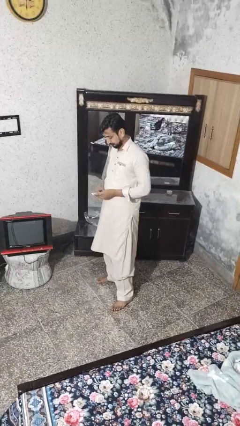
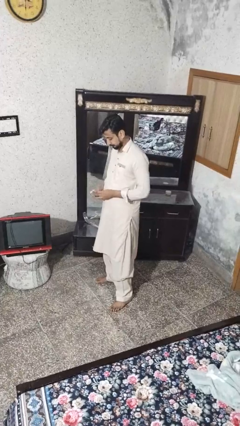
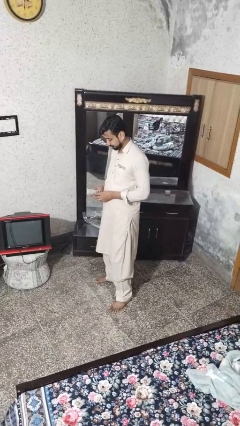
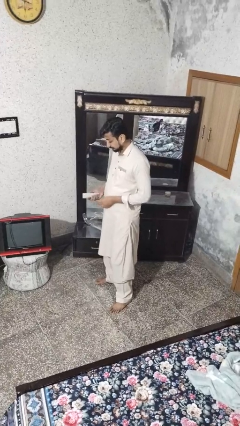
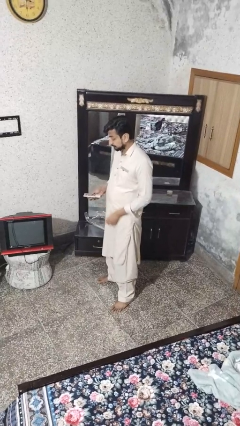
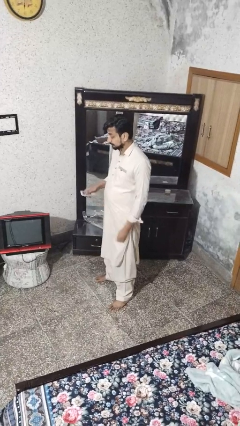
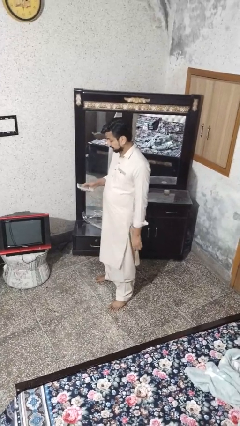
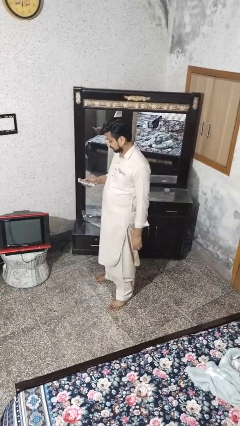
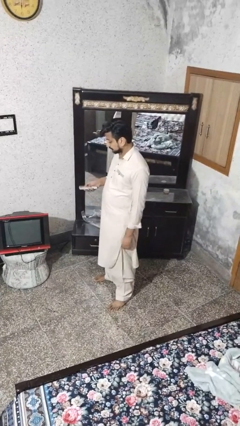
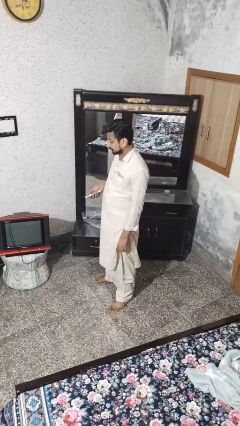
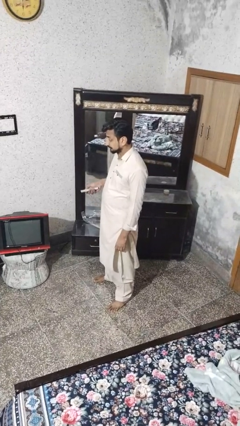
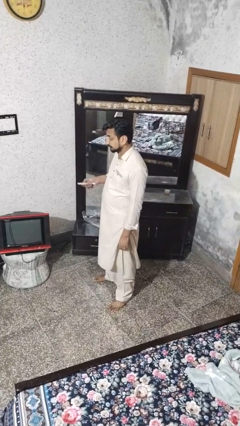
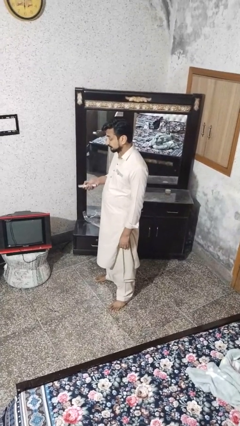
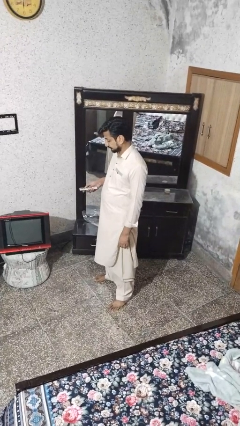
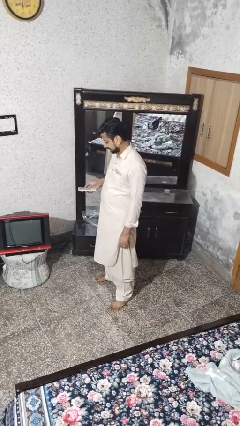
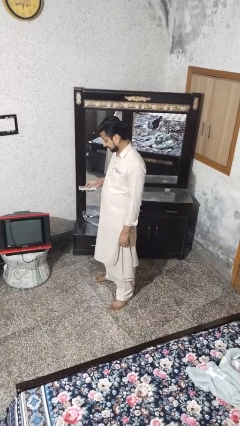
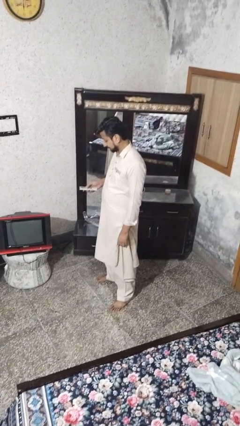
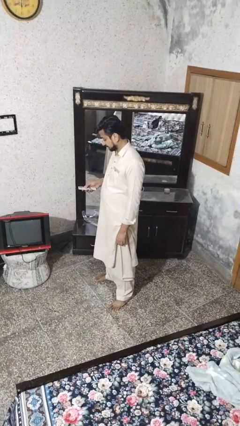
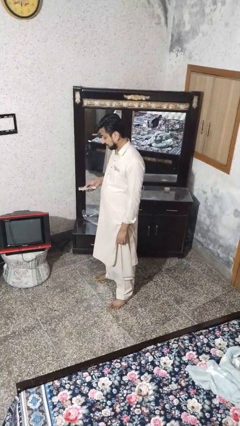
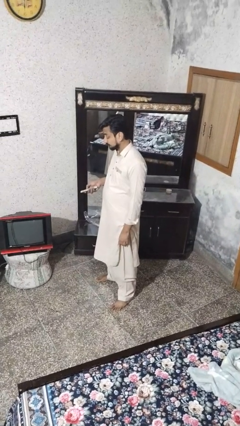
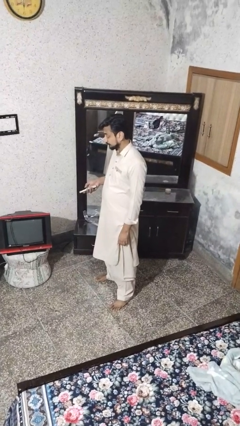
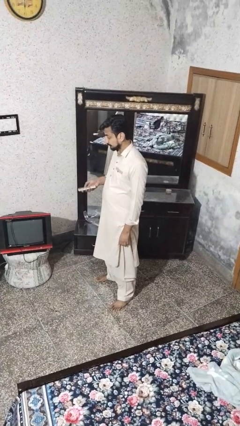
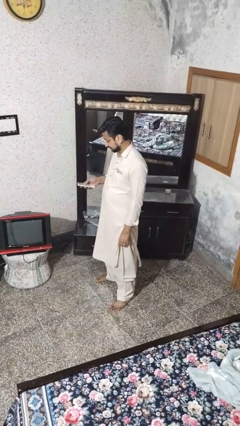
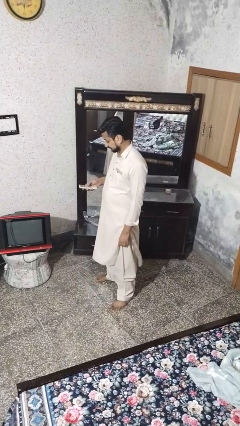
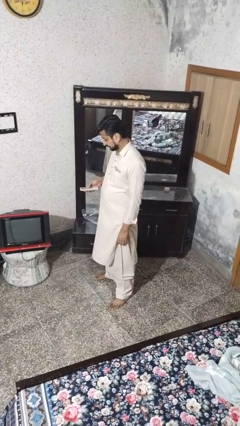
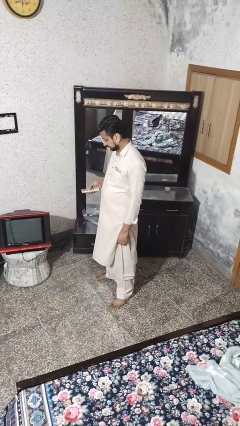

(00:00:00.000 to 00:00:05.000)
person uses television remote

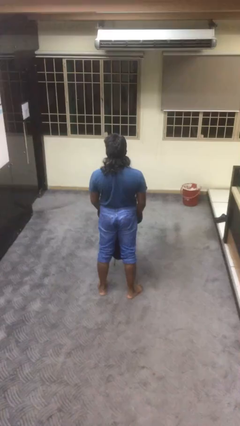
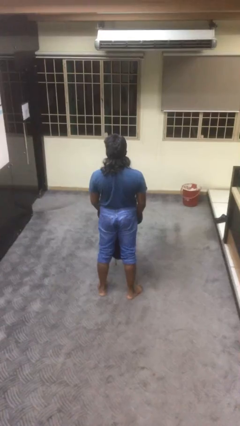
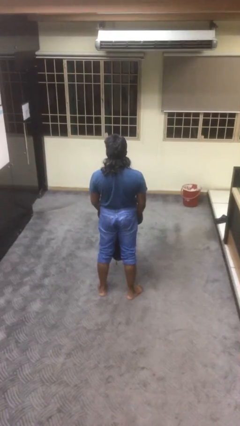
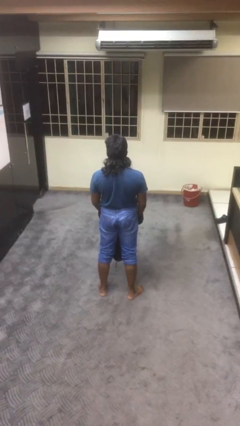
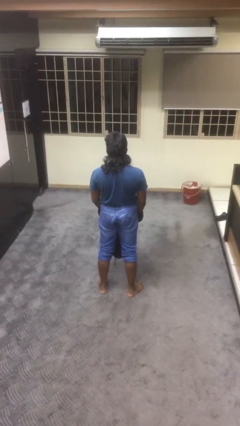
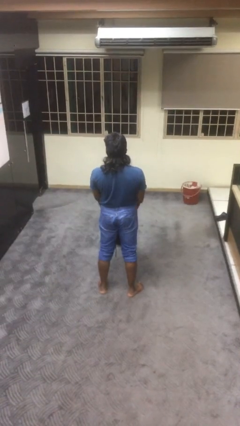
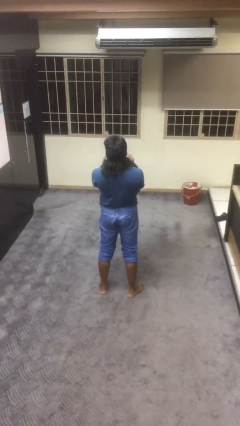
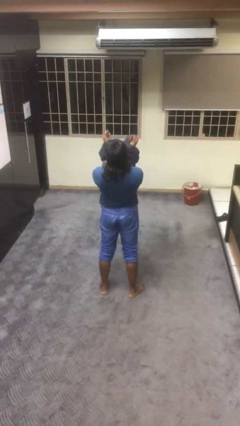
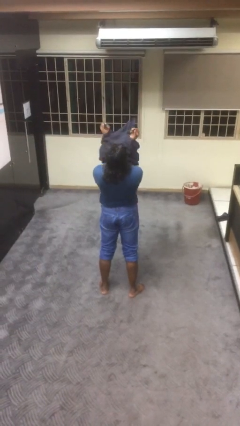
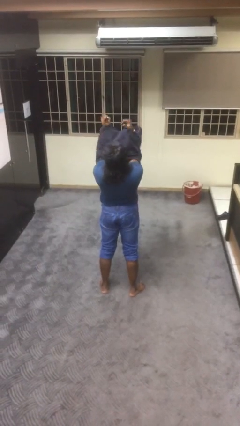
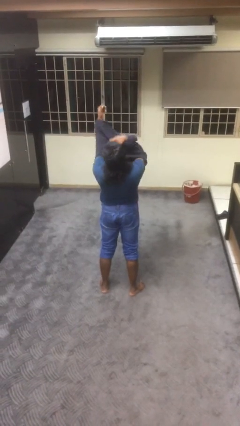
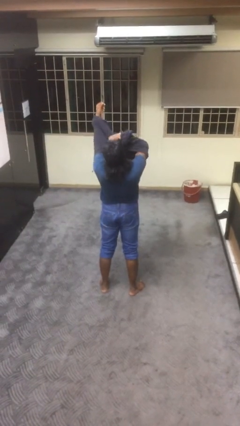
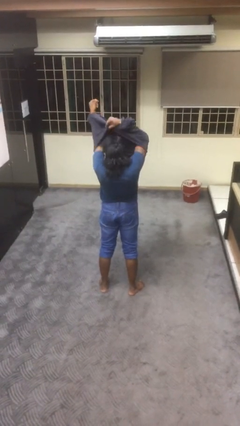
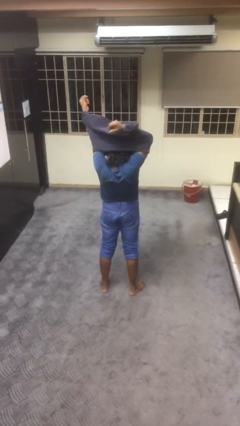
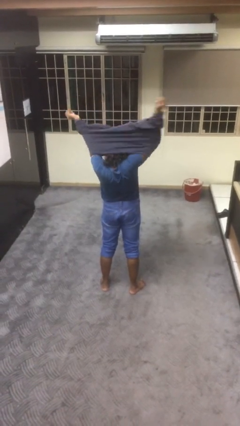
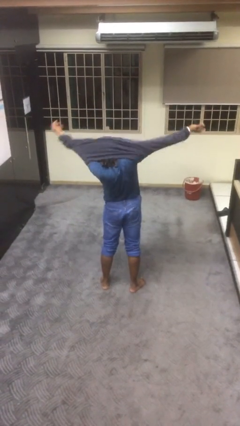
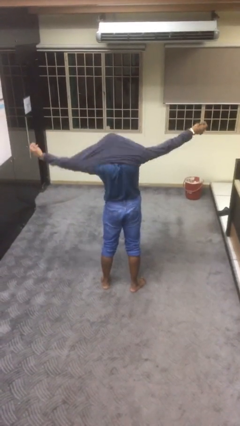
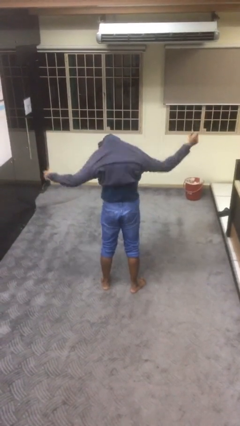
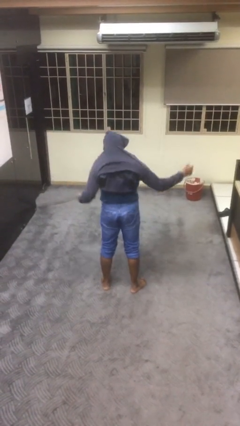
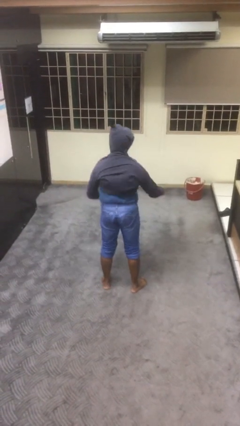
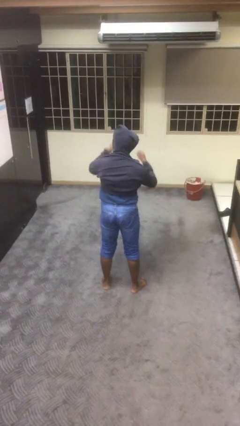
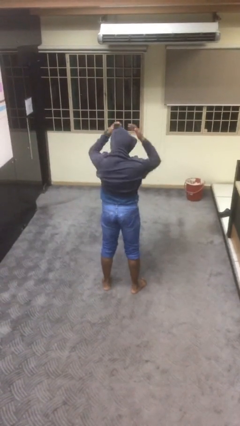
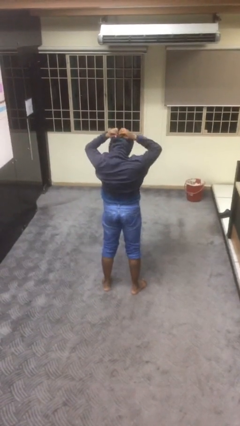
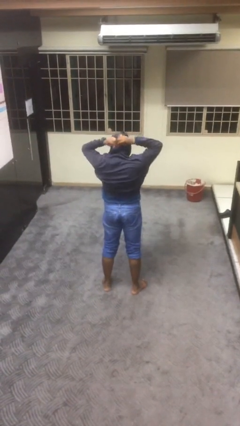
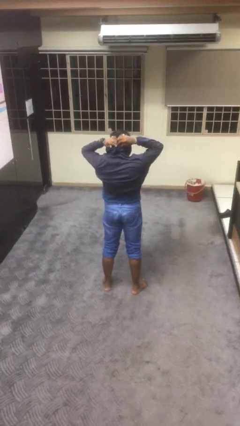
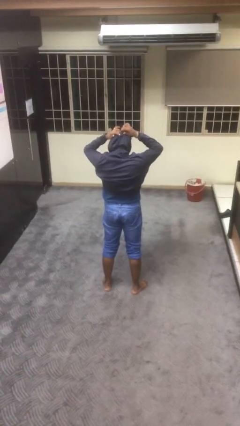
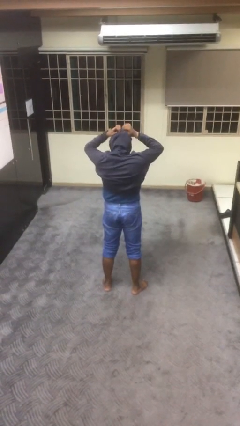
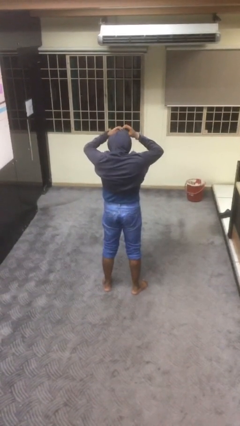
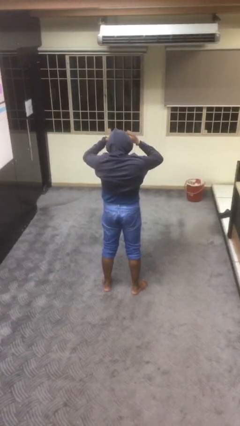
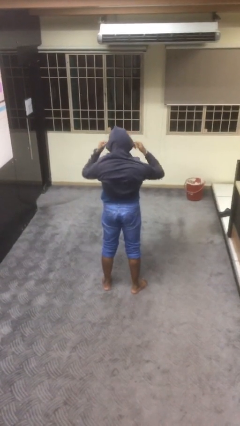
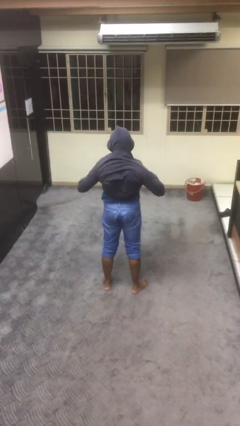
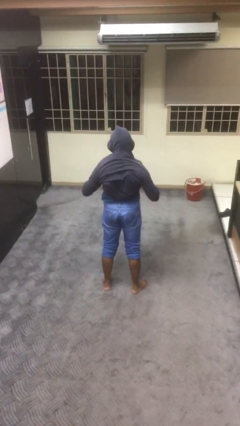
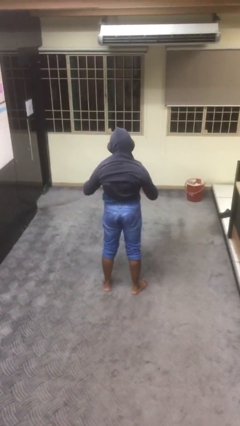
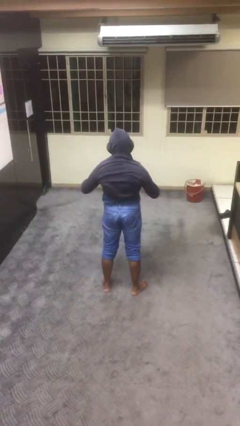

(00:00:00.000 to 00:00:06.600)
person puts on hoodie

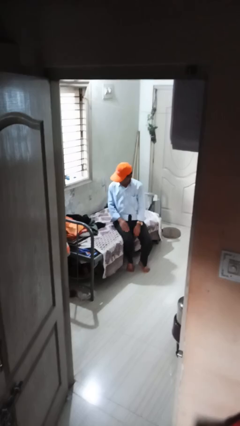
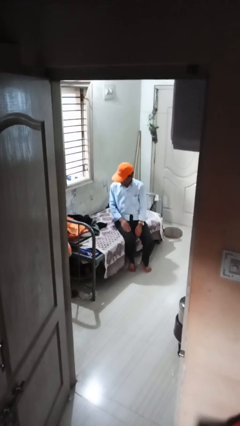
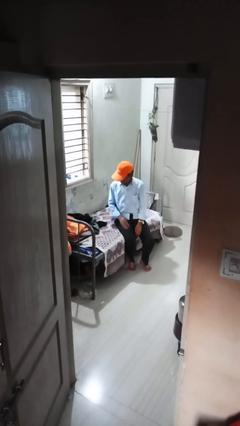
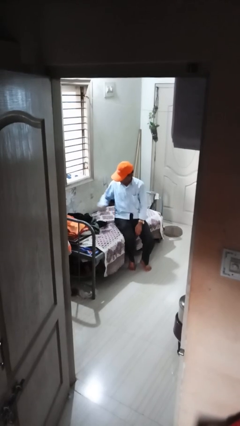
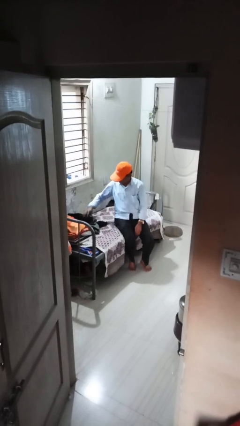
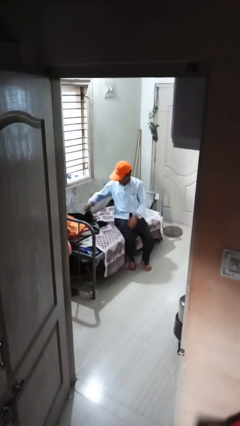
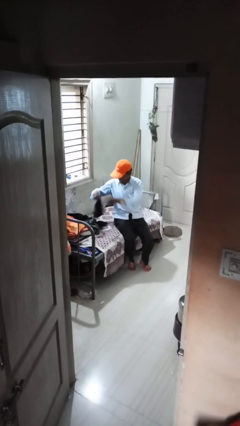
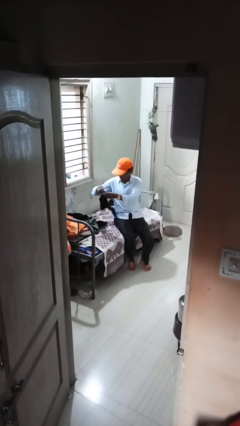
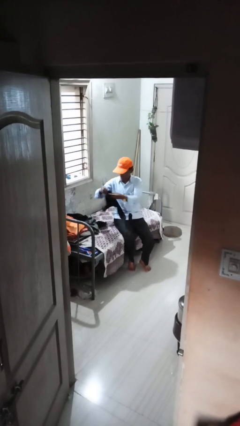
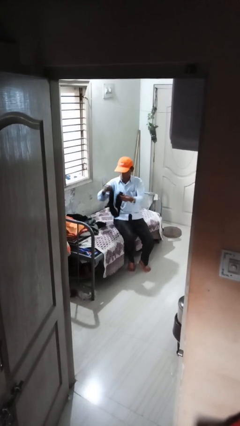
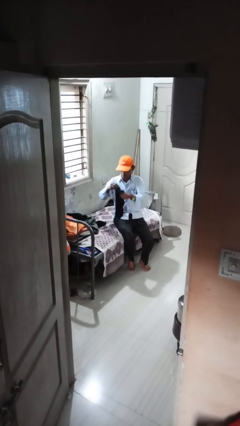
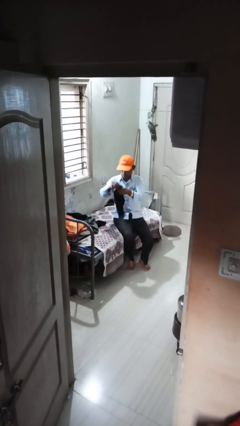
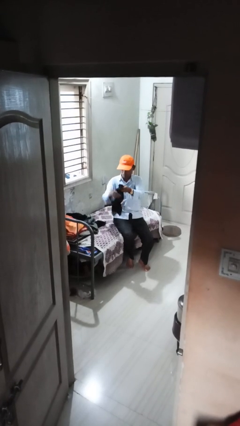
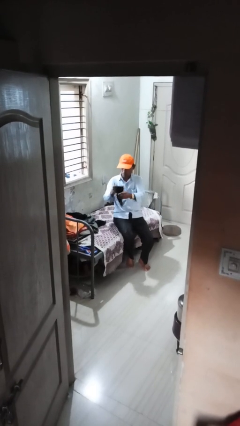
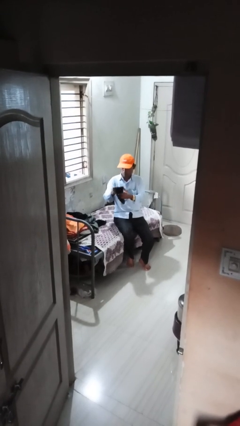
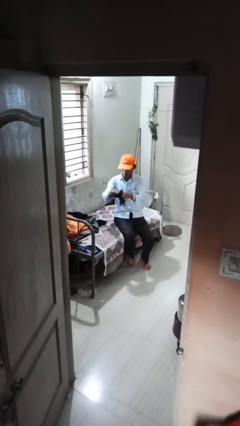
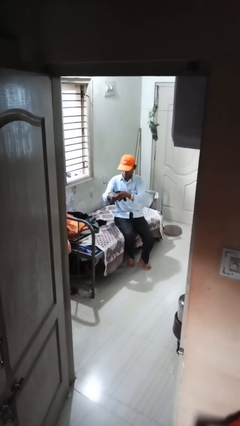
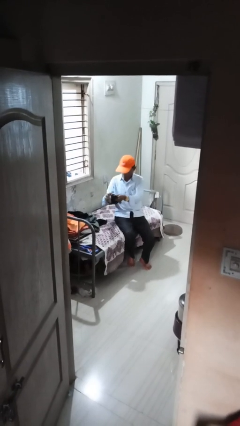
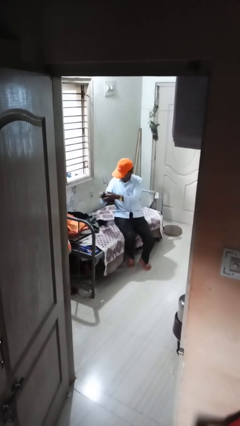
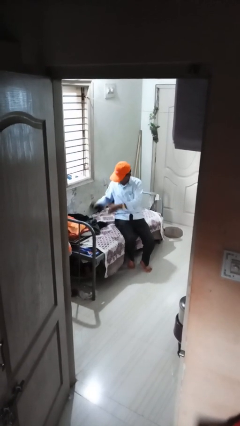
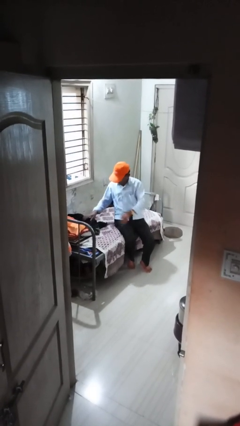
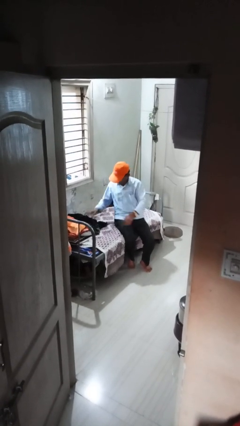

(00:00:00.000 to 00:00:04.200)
person folds socks

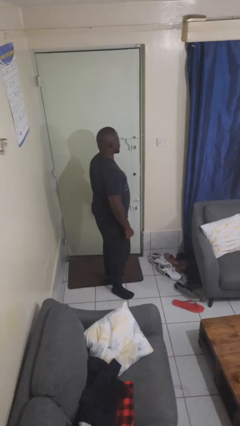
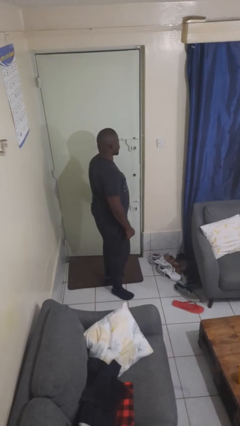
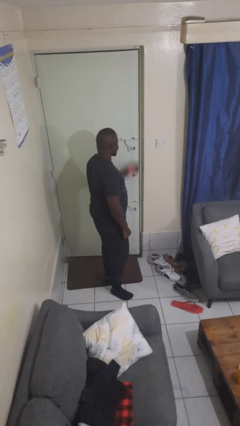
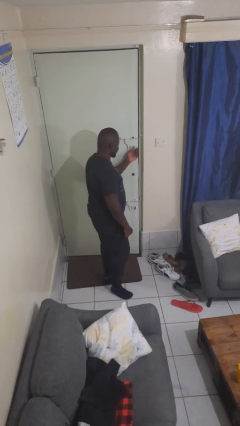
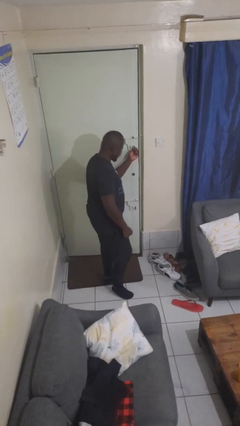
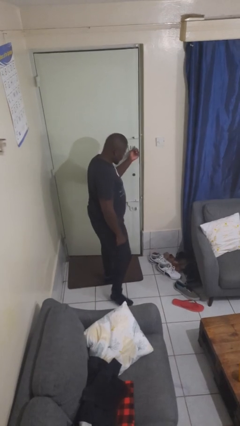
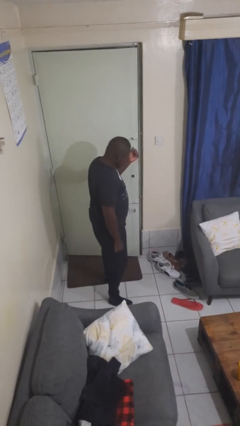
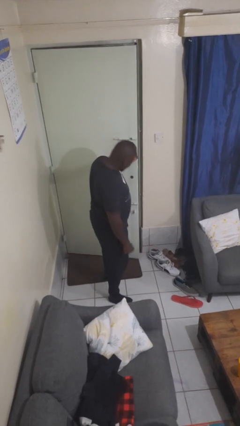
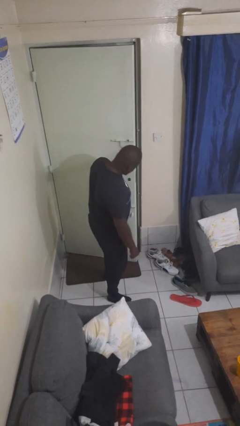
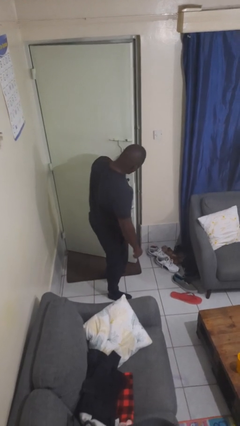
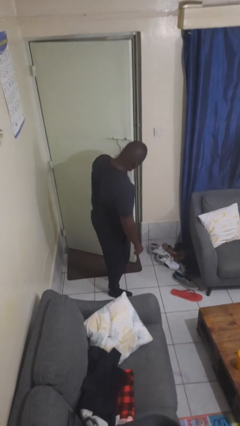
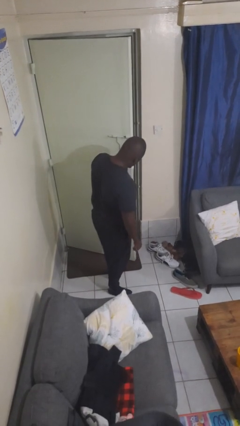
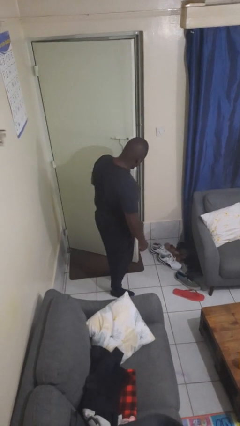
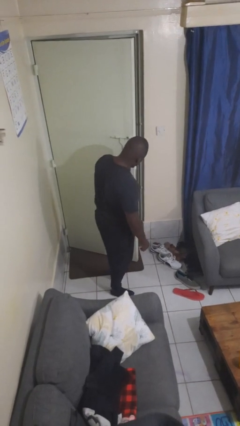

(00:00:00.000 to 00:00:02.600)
person opens facility door
